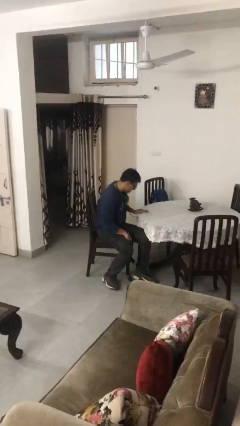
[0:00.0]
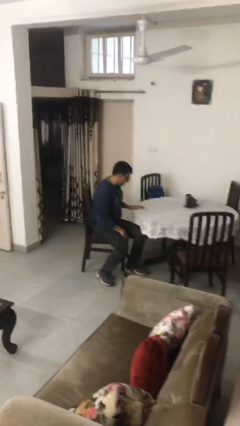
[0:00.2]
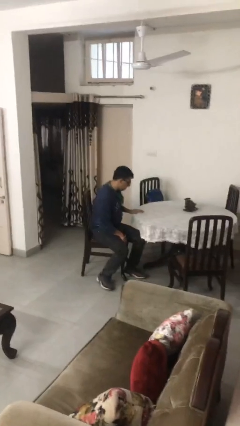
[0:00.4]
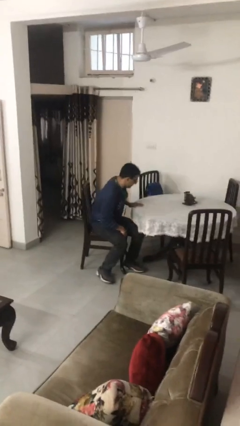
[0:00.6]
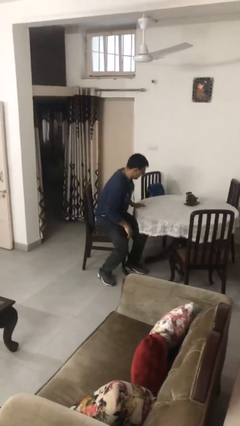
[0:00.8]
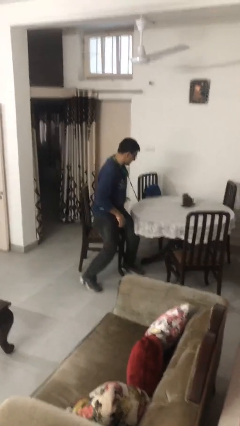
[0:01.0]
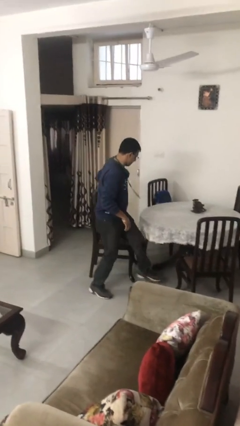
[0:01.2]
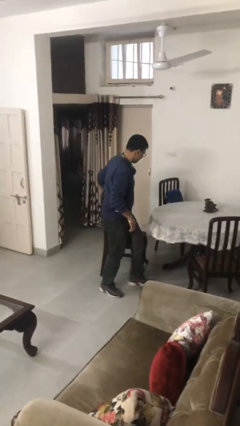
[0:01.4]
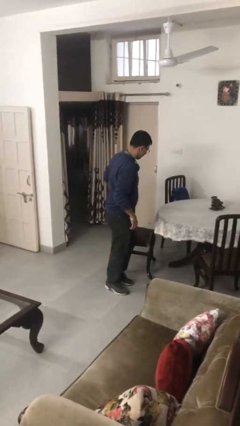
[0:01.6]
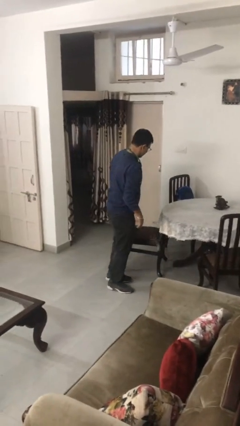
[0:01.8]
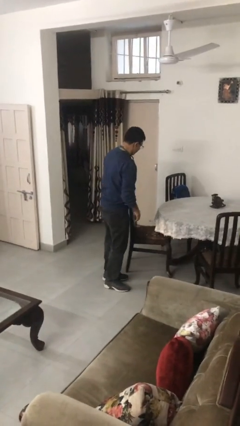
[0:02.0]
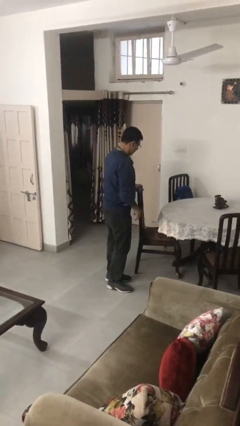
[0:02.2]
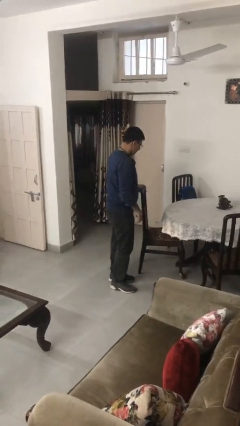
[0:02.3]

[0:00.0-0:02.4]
person stands up

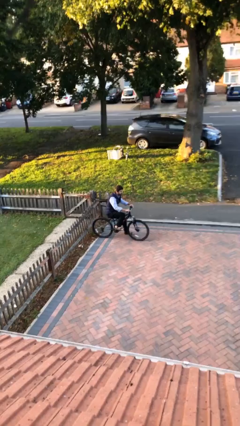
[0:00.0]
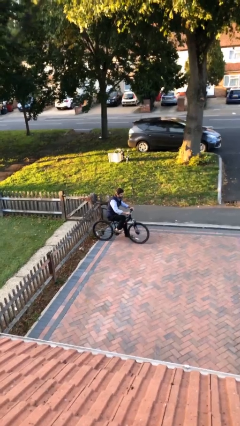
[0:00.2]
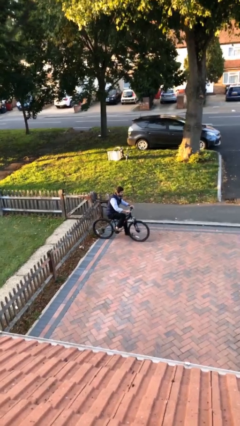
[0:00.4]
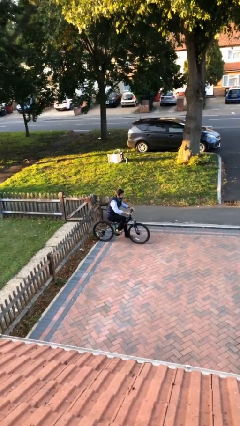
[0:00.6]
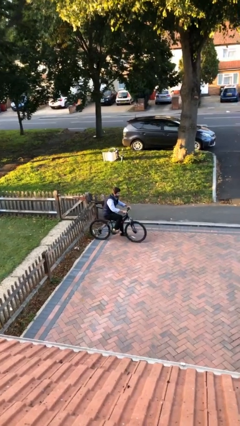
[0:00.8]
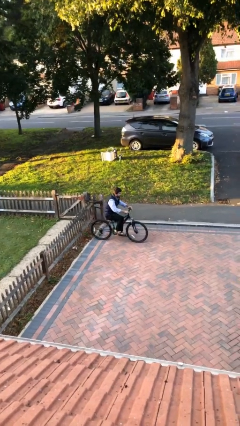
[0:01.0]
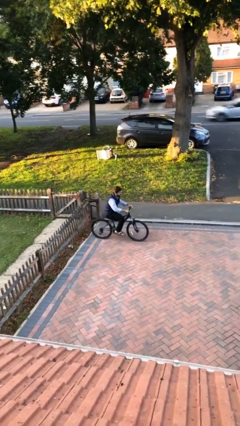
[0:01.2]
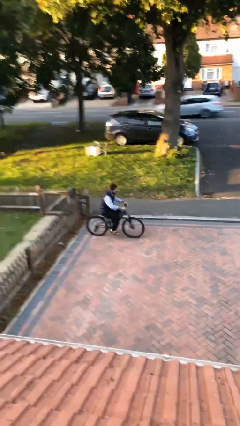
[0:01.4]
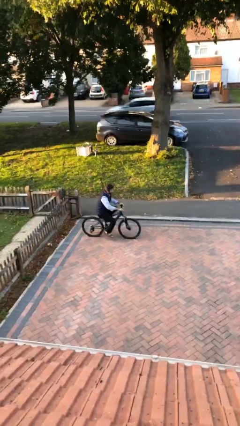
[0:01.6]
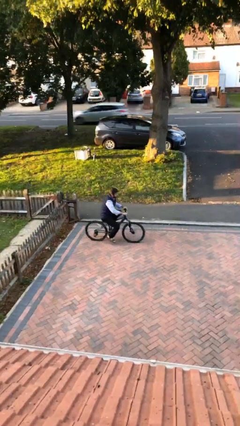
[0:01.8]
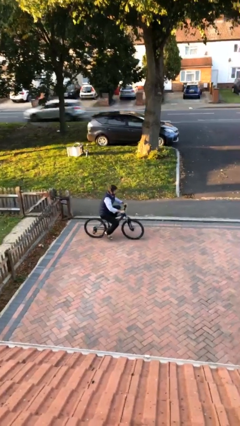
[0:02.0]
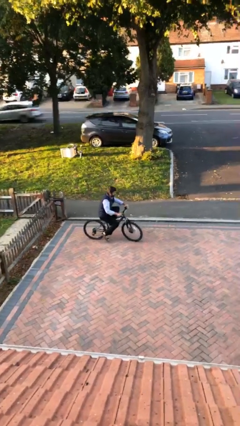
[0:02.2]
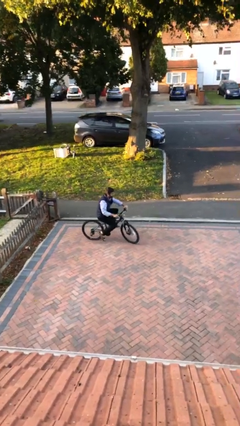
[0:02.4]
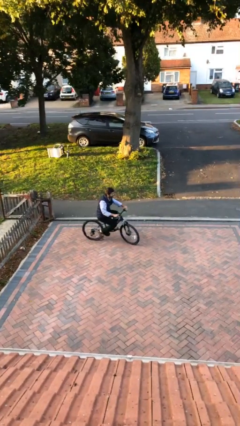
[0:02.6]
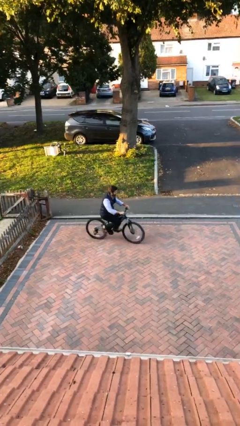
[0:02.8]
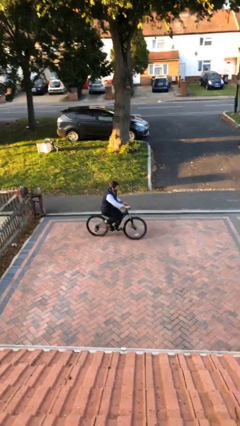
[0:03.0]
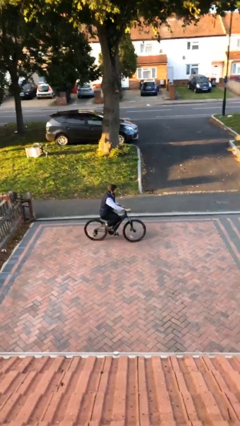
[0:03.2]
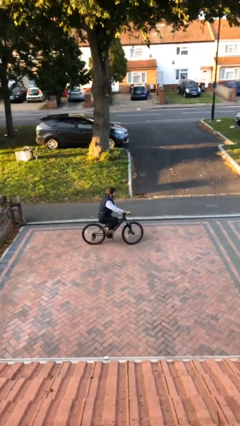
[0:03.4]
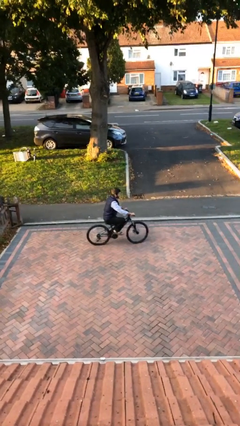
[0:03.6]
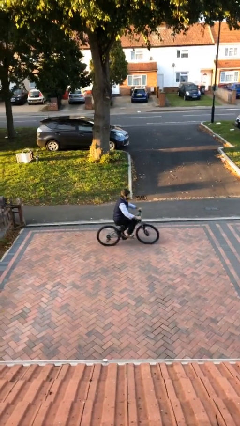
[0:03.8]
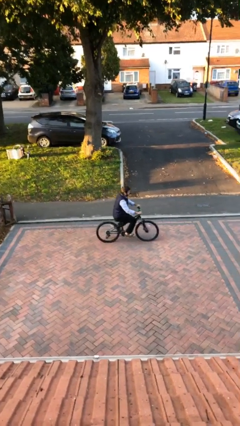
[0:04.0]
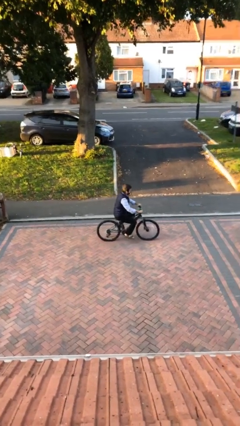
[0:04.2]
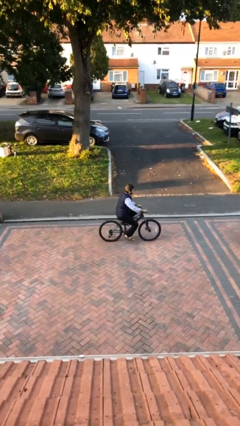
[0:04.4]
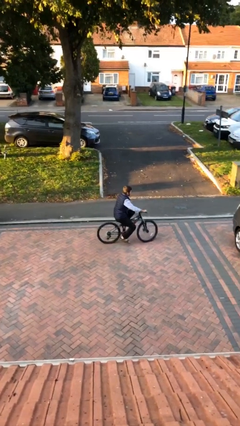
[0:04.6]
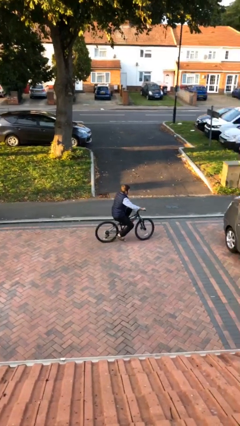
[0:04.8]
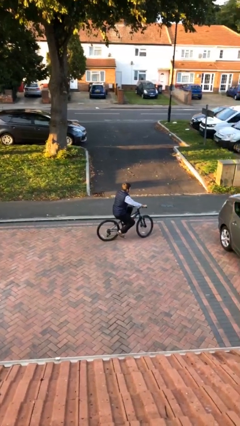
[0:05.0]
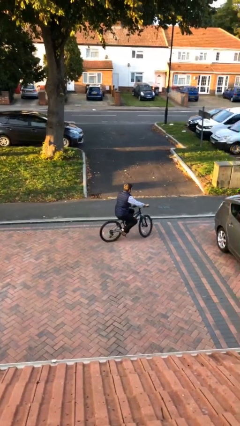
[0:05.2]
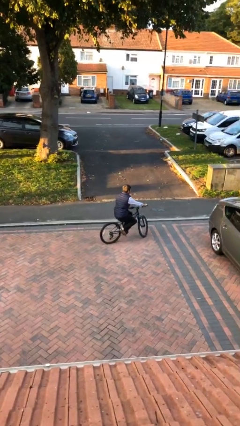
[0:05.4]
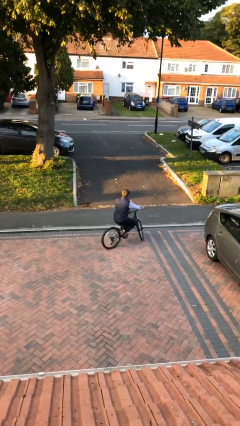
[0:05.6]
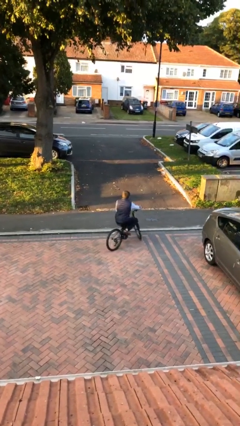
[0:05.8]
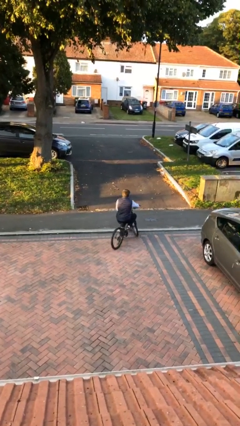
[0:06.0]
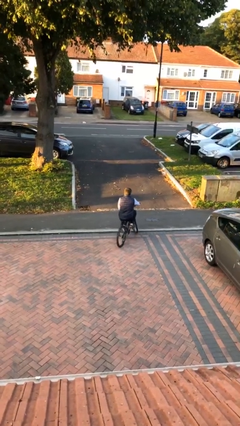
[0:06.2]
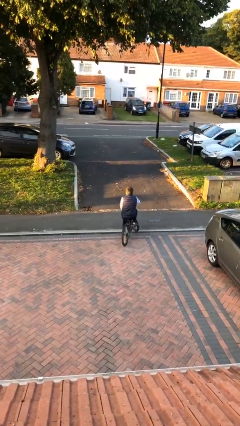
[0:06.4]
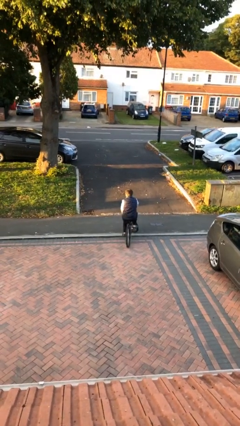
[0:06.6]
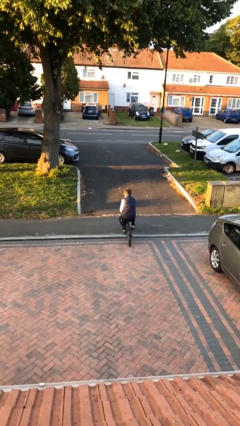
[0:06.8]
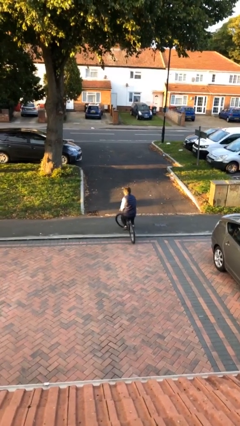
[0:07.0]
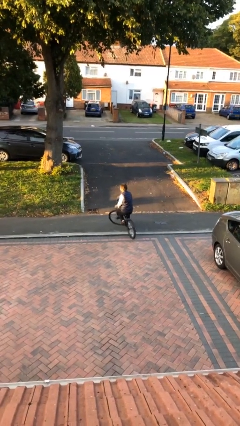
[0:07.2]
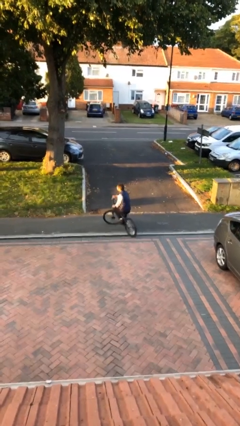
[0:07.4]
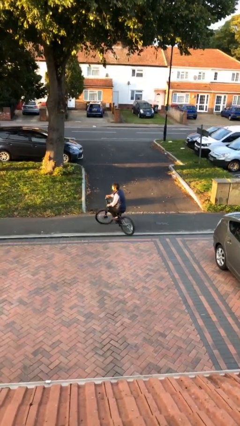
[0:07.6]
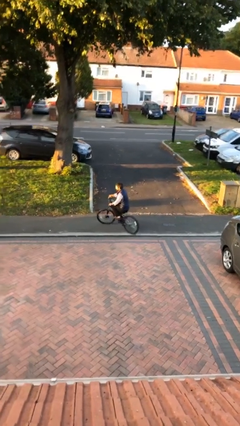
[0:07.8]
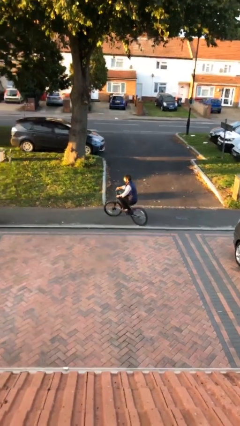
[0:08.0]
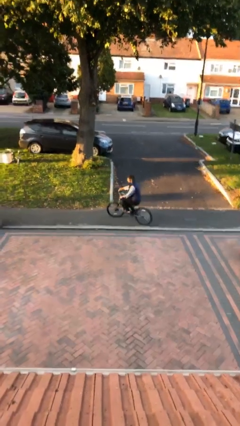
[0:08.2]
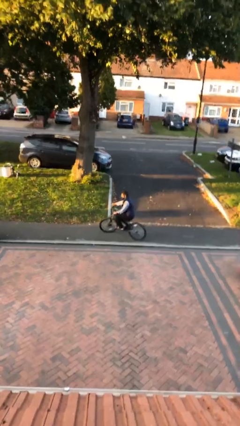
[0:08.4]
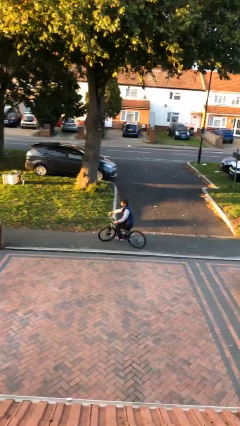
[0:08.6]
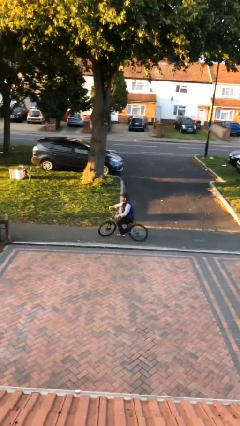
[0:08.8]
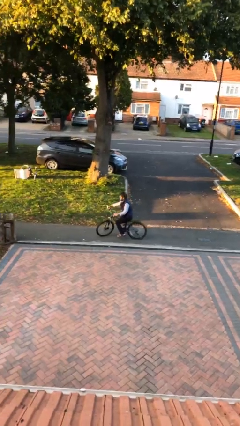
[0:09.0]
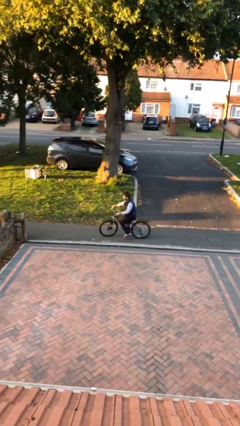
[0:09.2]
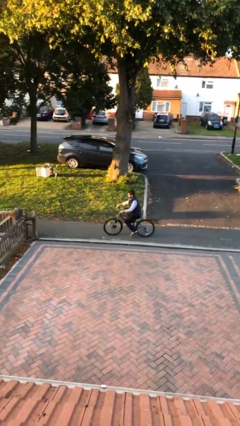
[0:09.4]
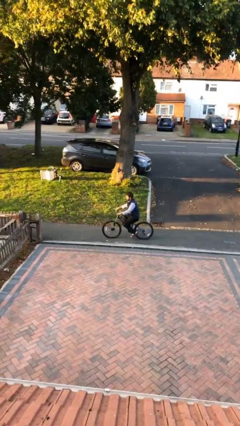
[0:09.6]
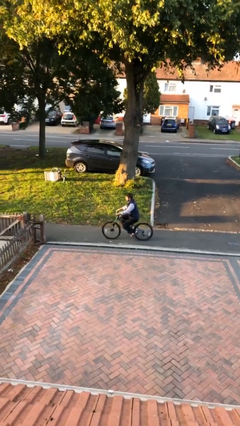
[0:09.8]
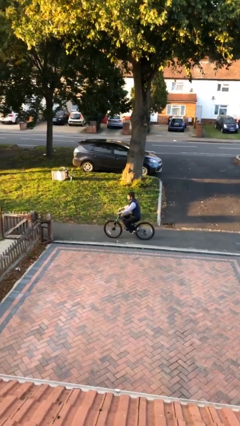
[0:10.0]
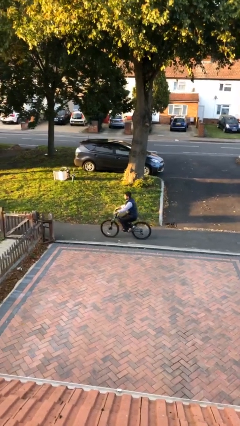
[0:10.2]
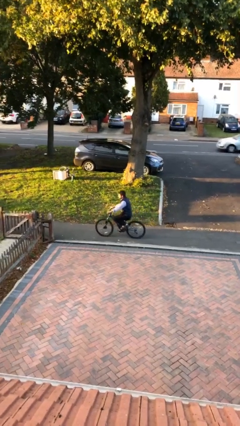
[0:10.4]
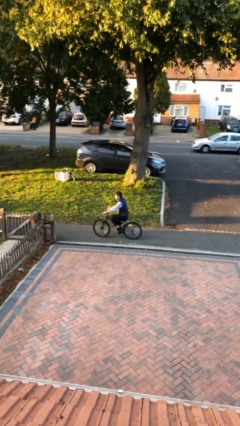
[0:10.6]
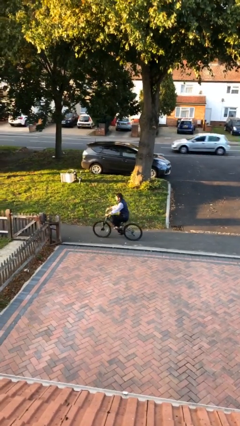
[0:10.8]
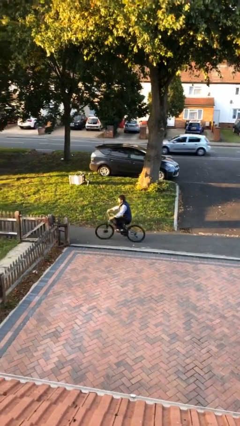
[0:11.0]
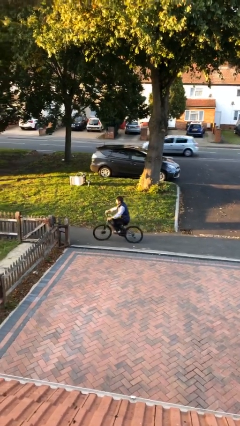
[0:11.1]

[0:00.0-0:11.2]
person rides bicycle

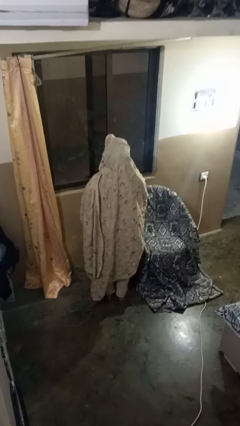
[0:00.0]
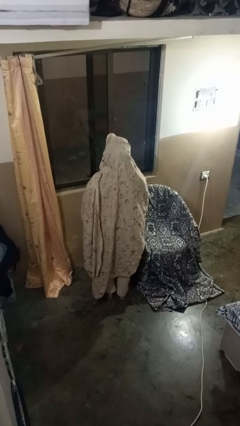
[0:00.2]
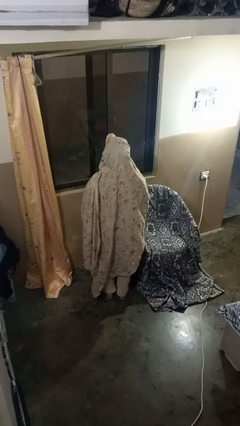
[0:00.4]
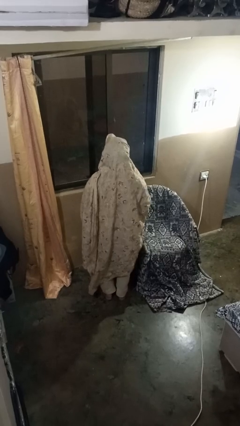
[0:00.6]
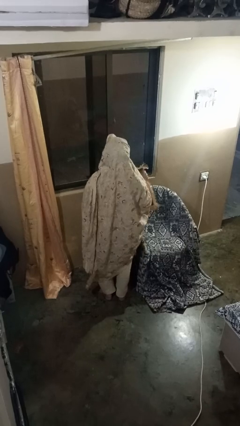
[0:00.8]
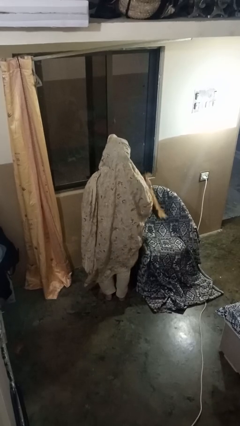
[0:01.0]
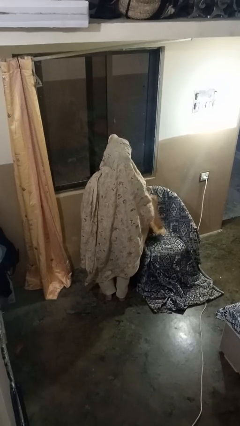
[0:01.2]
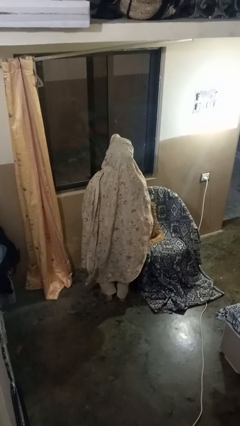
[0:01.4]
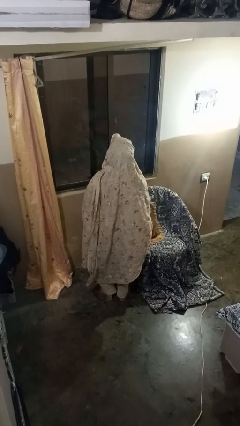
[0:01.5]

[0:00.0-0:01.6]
person puts down object on couch

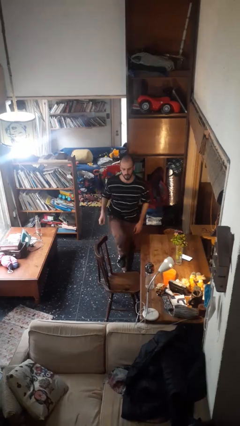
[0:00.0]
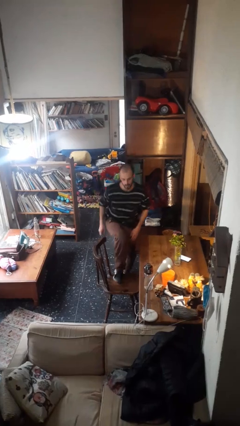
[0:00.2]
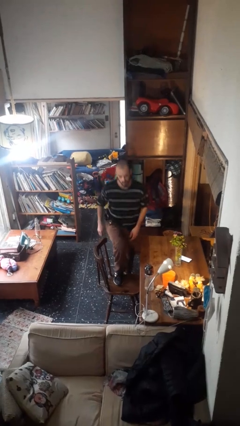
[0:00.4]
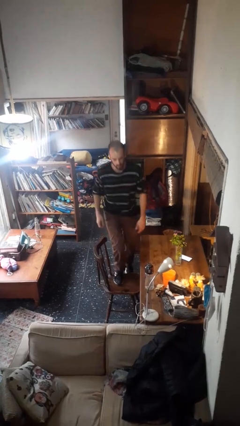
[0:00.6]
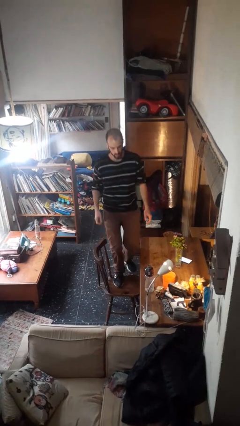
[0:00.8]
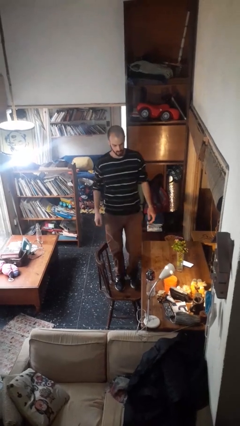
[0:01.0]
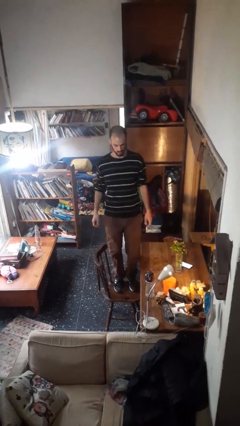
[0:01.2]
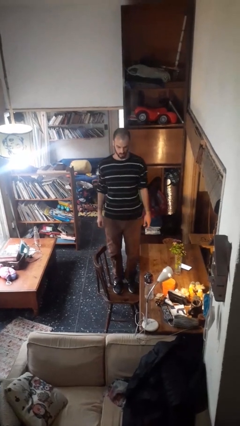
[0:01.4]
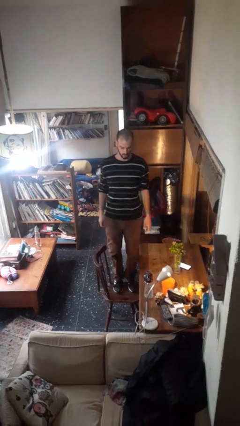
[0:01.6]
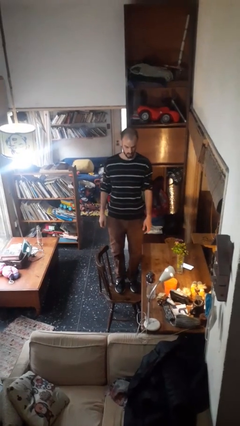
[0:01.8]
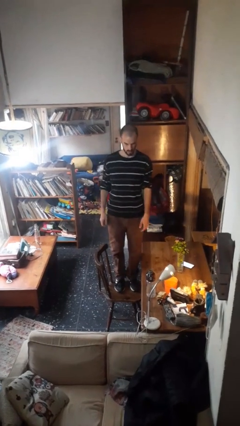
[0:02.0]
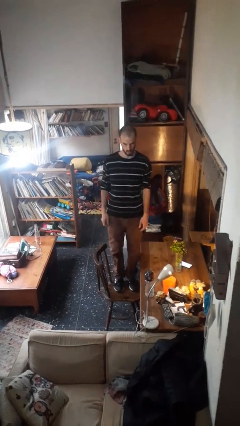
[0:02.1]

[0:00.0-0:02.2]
person climbs on chair

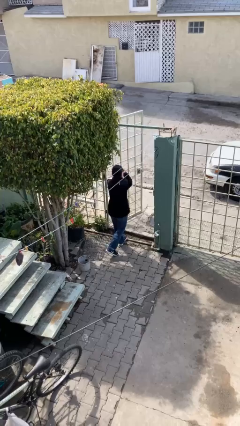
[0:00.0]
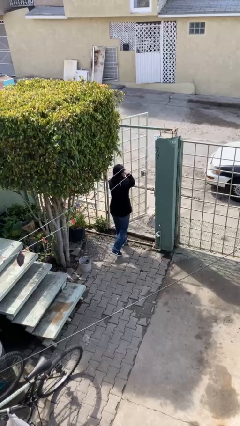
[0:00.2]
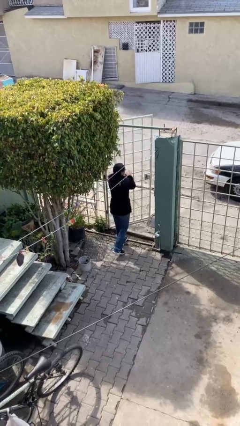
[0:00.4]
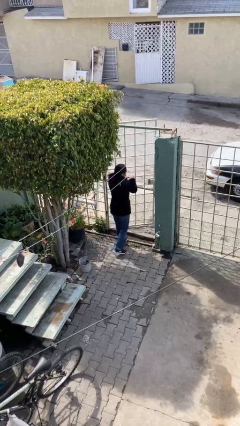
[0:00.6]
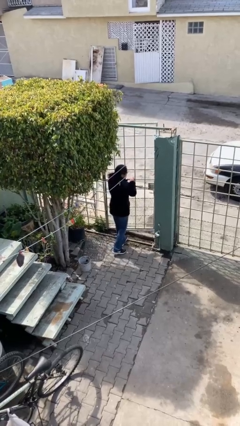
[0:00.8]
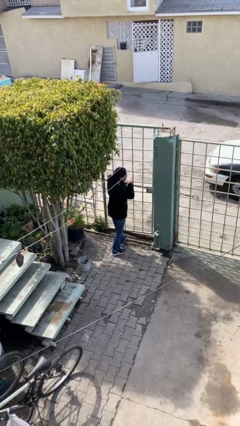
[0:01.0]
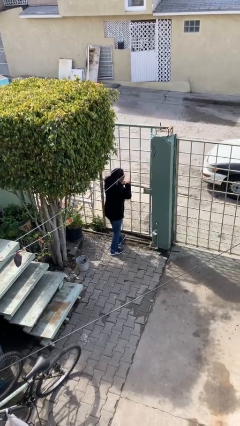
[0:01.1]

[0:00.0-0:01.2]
person closes facility door
